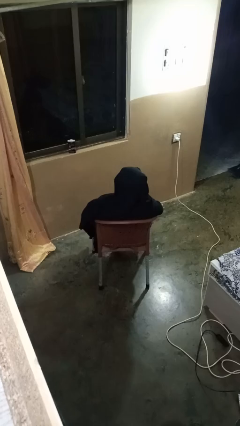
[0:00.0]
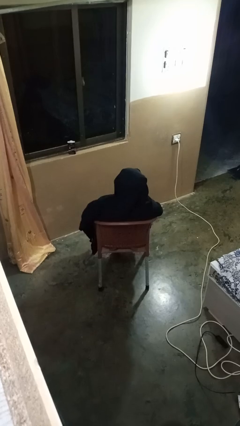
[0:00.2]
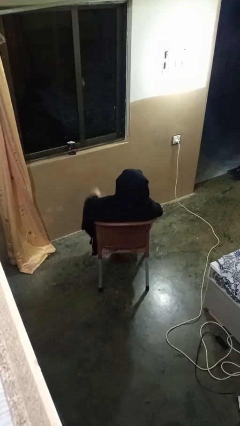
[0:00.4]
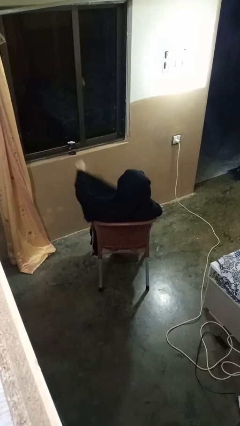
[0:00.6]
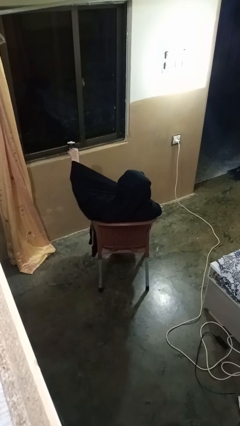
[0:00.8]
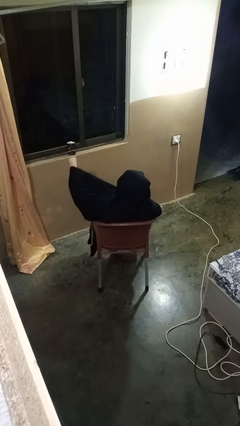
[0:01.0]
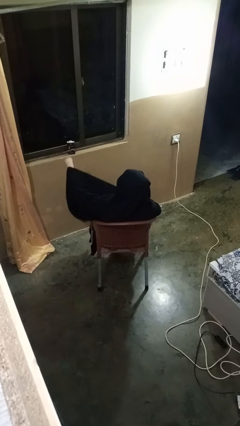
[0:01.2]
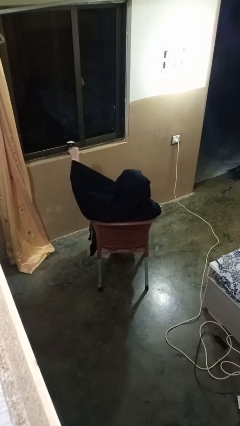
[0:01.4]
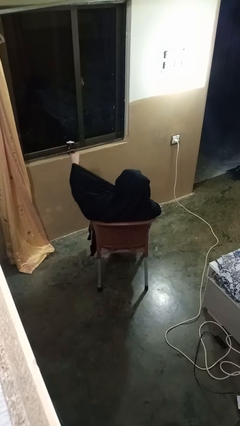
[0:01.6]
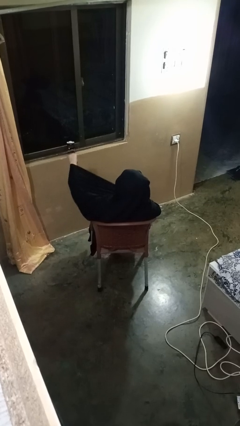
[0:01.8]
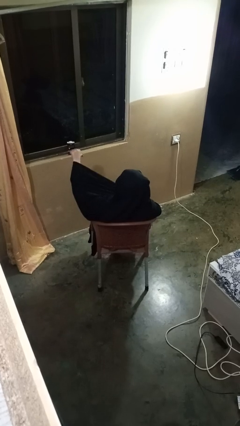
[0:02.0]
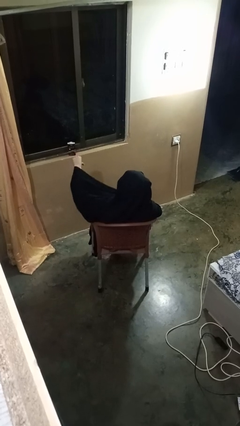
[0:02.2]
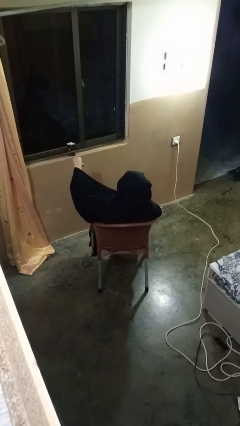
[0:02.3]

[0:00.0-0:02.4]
person gestures thumbs down

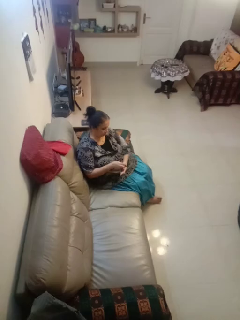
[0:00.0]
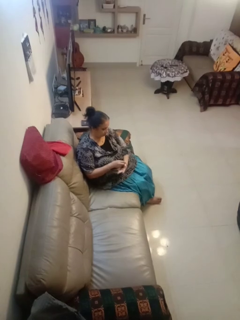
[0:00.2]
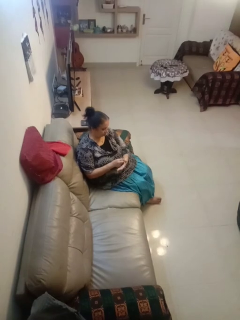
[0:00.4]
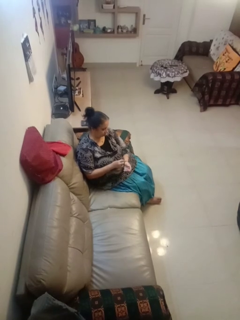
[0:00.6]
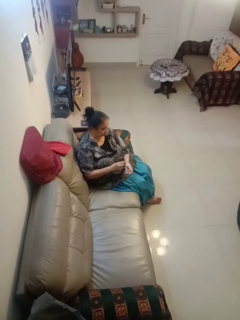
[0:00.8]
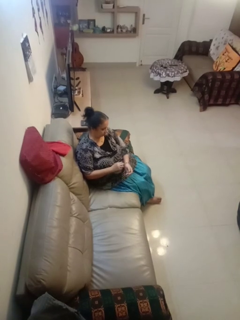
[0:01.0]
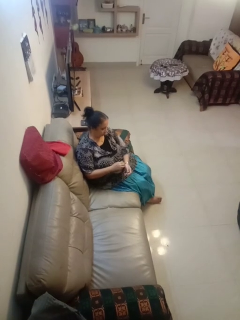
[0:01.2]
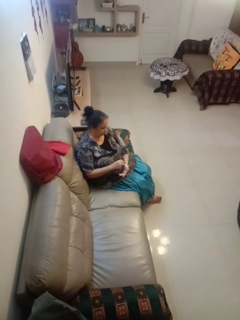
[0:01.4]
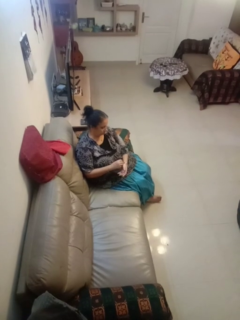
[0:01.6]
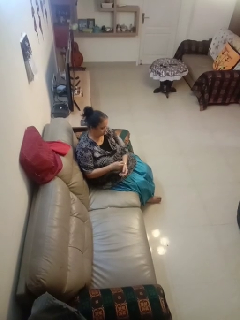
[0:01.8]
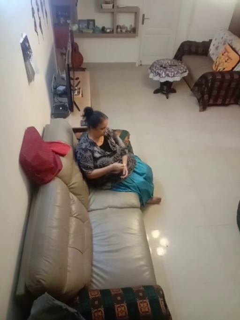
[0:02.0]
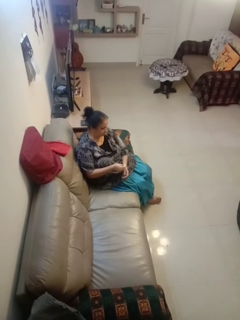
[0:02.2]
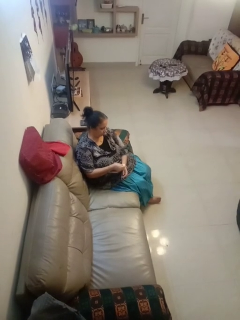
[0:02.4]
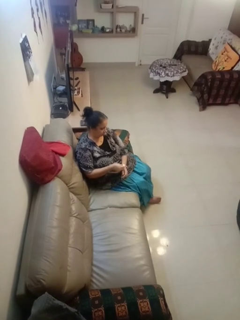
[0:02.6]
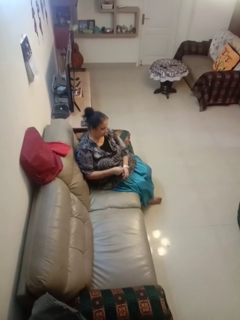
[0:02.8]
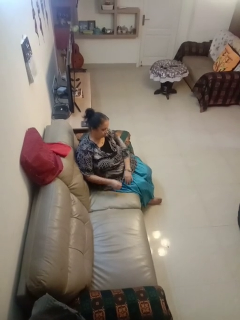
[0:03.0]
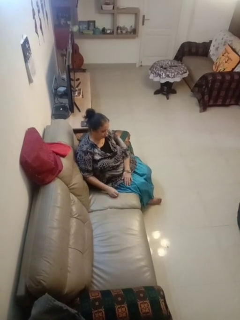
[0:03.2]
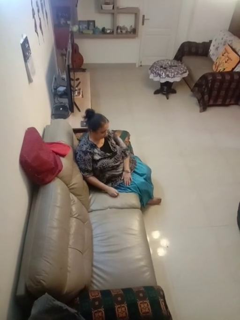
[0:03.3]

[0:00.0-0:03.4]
person puts on wristwatch

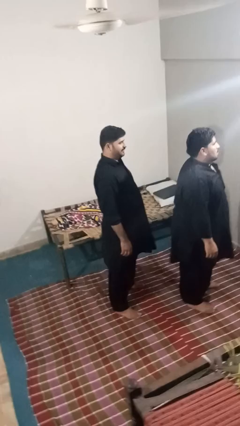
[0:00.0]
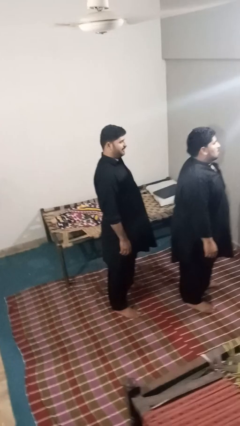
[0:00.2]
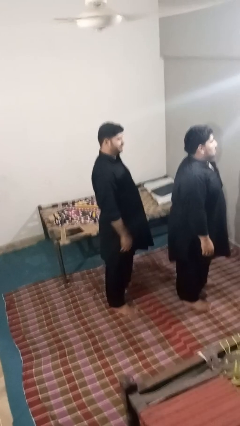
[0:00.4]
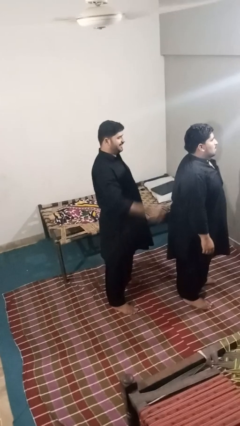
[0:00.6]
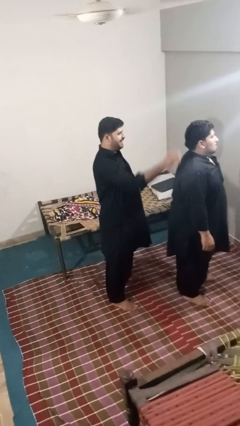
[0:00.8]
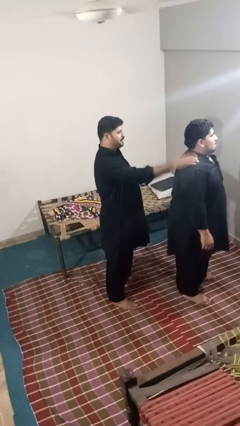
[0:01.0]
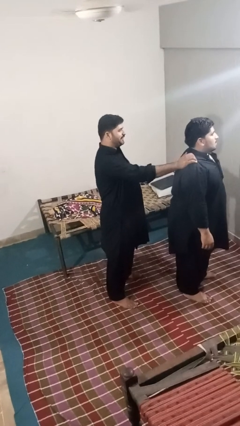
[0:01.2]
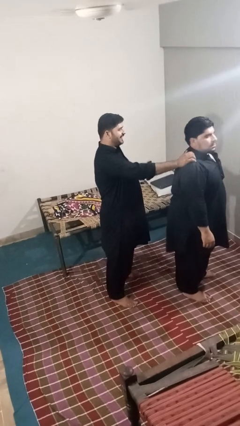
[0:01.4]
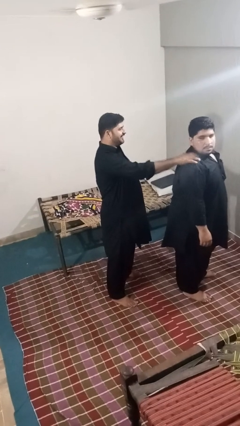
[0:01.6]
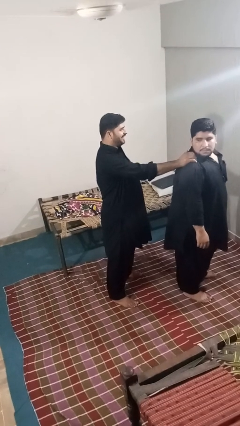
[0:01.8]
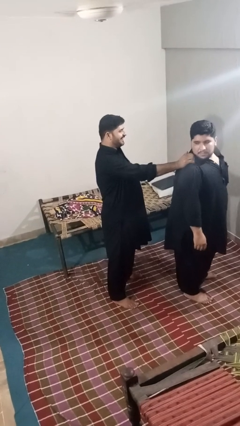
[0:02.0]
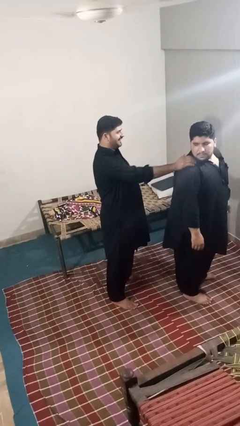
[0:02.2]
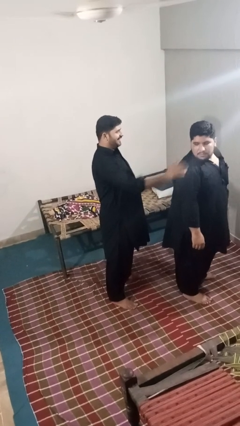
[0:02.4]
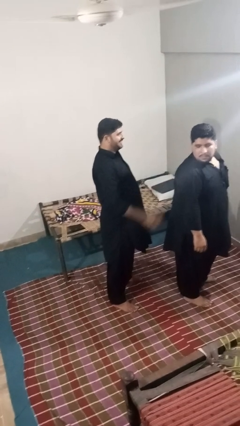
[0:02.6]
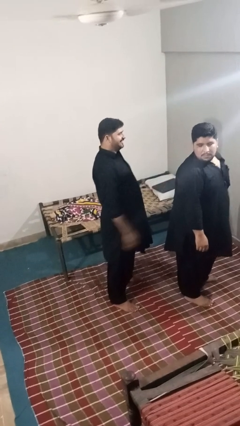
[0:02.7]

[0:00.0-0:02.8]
person touches back of person

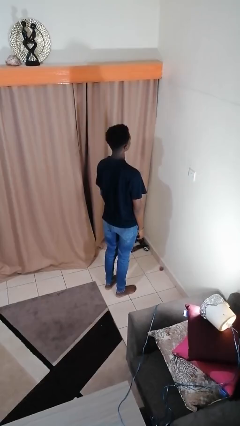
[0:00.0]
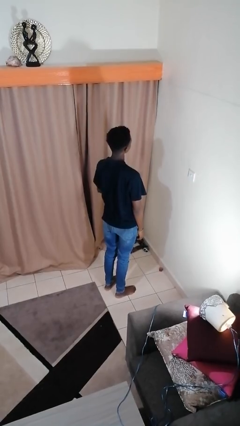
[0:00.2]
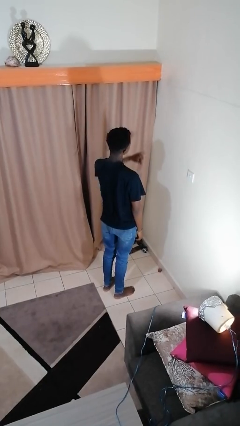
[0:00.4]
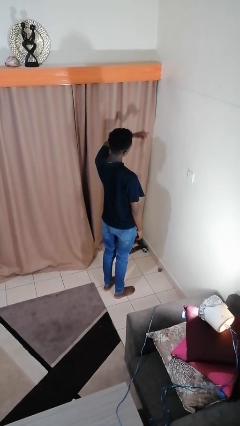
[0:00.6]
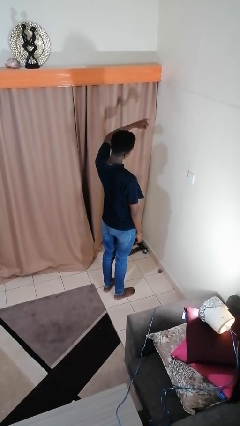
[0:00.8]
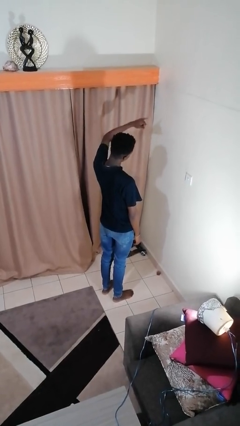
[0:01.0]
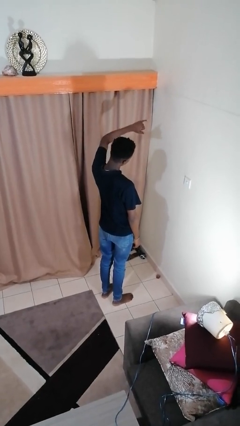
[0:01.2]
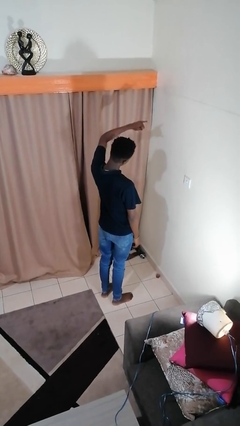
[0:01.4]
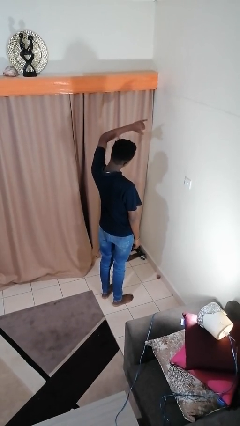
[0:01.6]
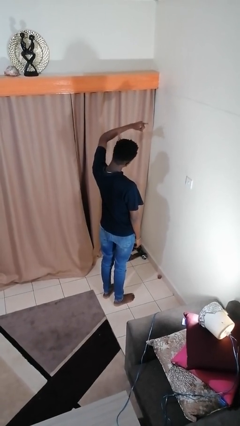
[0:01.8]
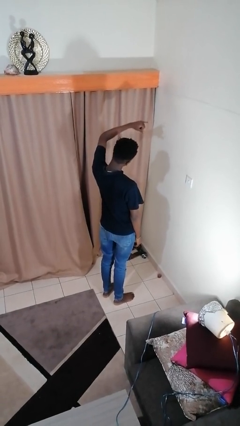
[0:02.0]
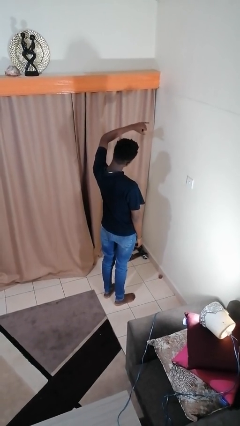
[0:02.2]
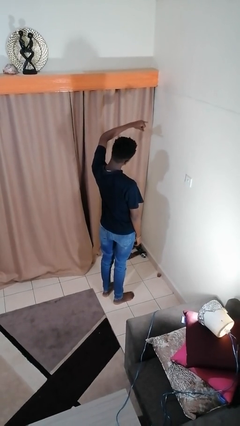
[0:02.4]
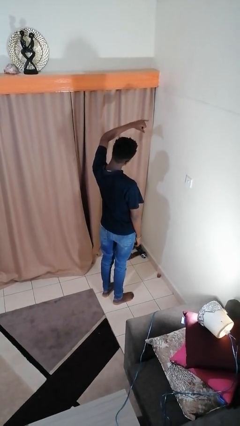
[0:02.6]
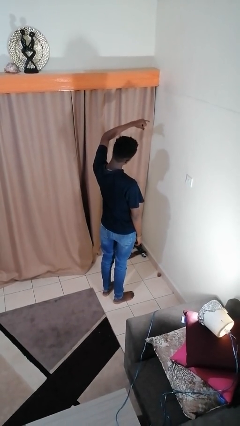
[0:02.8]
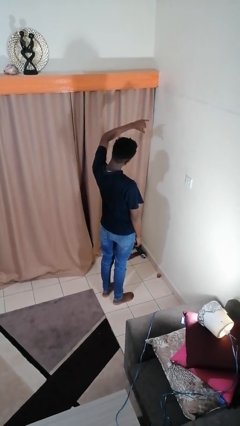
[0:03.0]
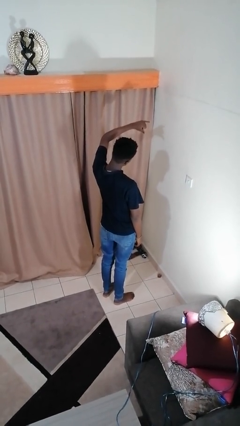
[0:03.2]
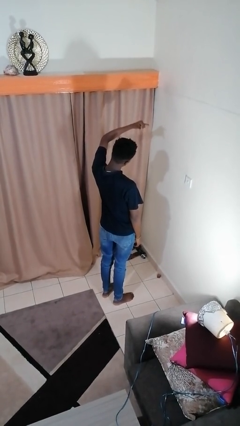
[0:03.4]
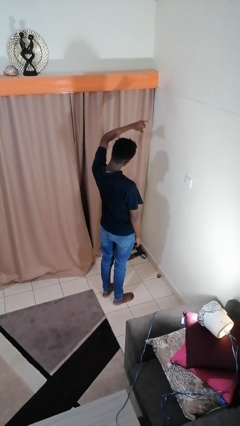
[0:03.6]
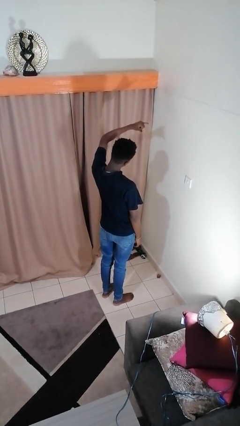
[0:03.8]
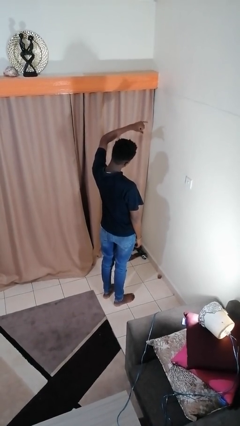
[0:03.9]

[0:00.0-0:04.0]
person gestures hang loose

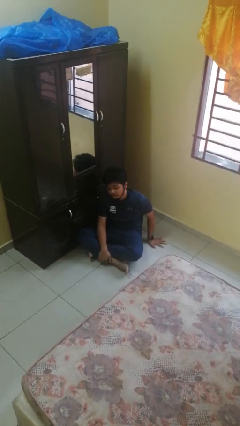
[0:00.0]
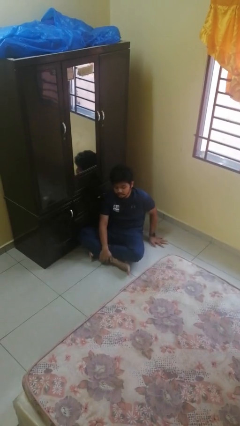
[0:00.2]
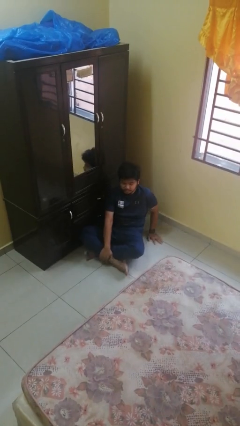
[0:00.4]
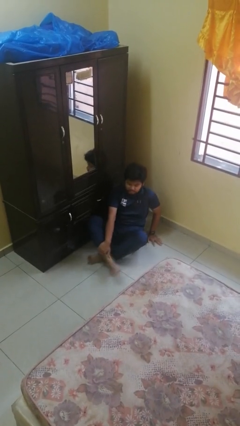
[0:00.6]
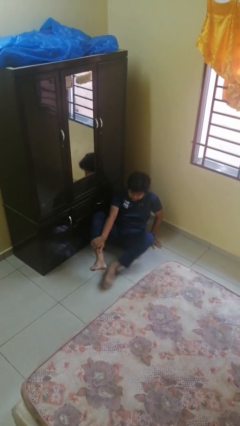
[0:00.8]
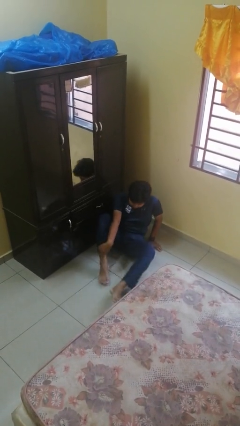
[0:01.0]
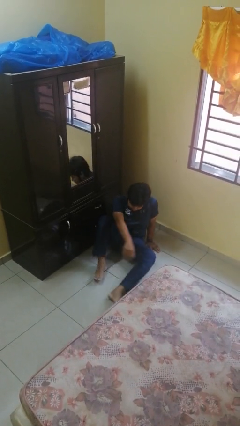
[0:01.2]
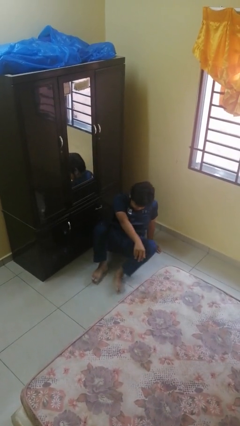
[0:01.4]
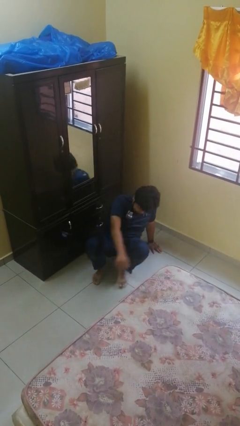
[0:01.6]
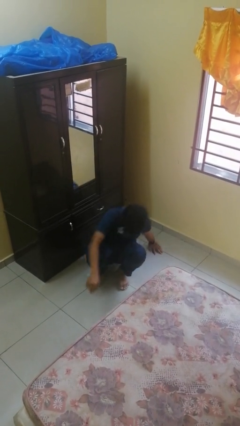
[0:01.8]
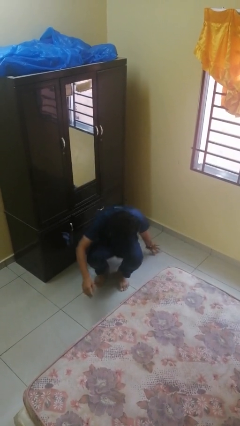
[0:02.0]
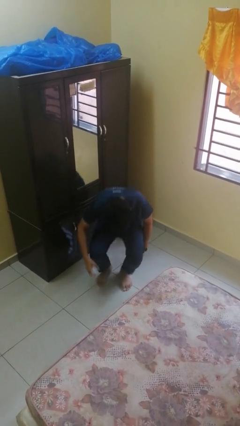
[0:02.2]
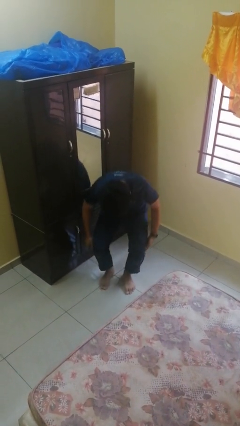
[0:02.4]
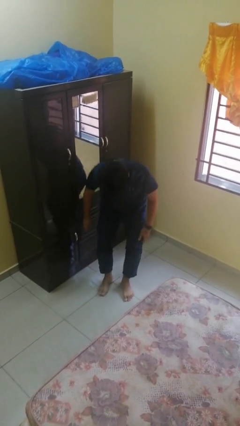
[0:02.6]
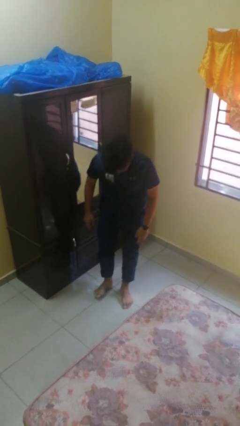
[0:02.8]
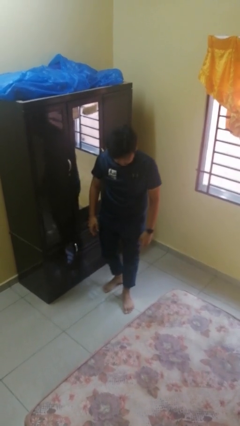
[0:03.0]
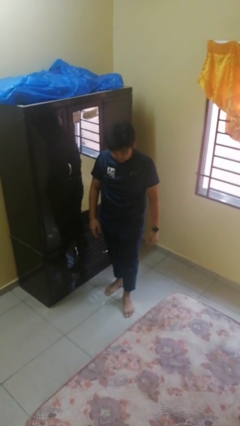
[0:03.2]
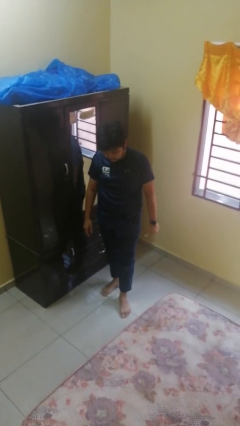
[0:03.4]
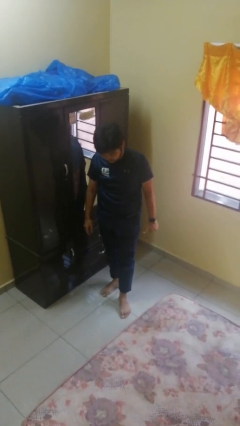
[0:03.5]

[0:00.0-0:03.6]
person stands up from floor

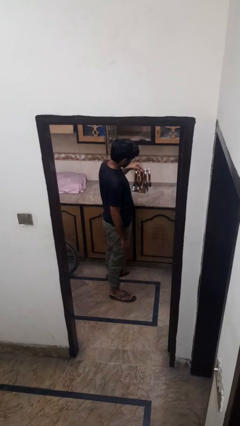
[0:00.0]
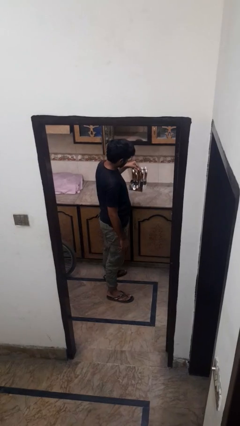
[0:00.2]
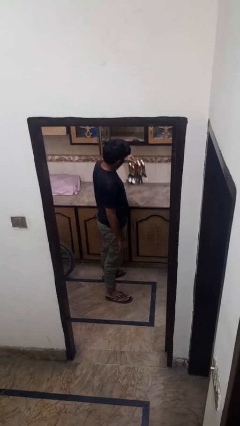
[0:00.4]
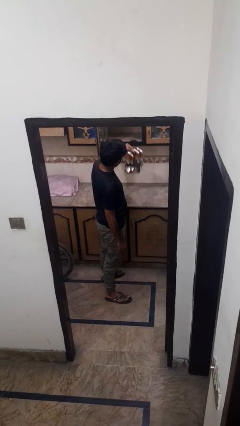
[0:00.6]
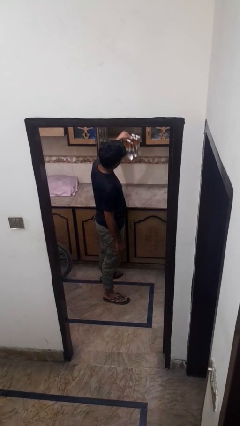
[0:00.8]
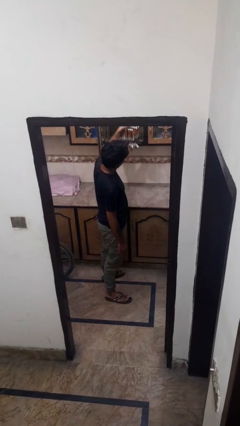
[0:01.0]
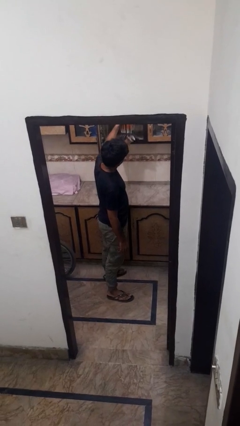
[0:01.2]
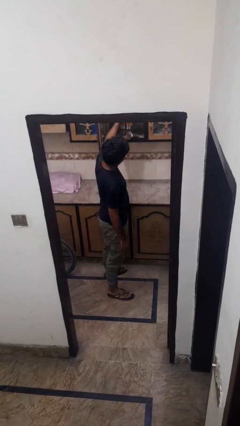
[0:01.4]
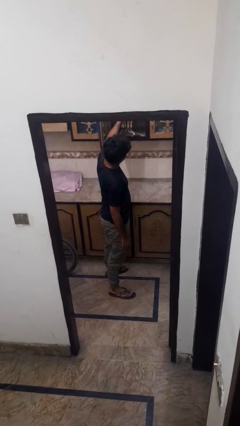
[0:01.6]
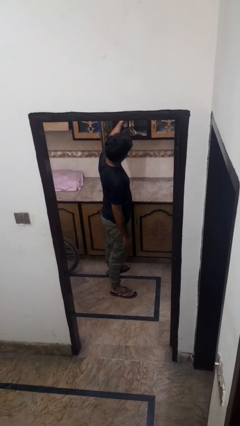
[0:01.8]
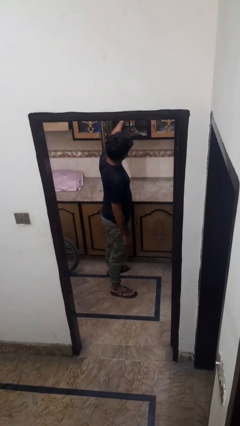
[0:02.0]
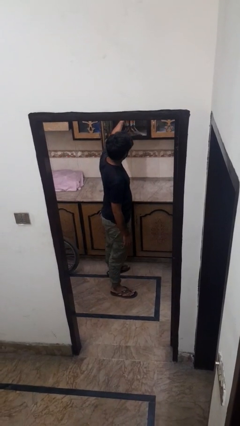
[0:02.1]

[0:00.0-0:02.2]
person puts down object into cabinet
